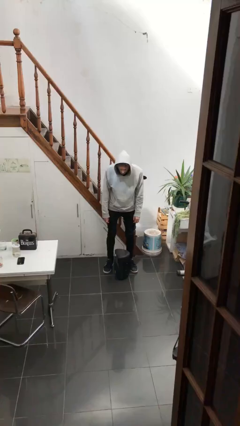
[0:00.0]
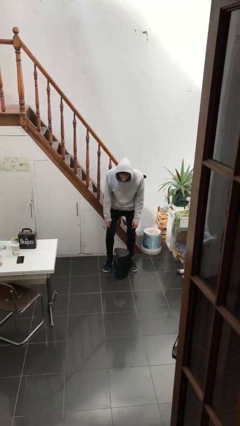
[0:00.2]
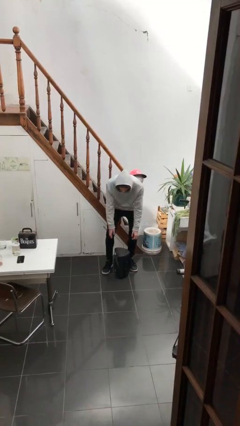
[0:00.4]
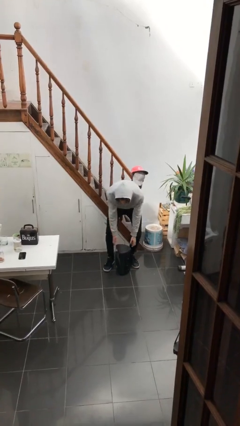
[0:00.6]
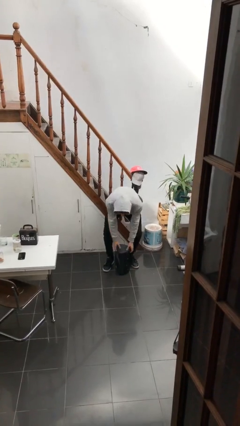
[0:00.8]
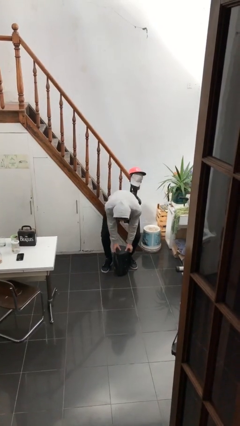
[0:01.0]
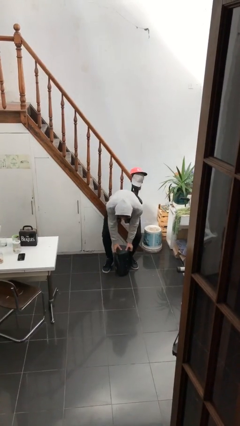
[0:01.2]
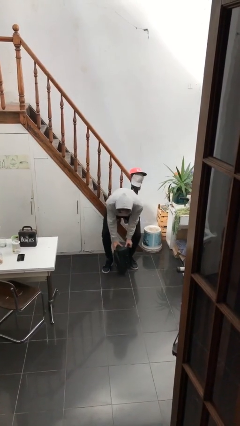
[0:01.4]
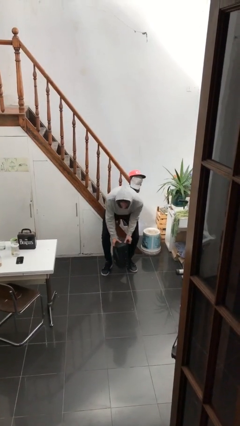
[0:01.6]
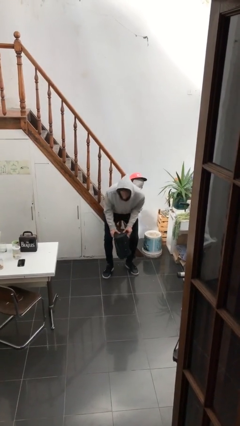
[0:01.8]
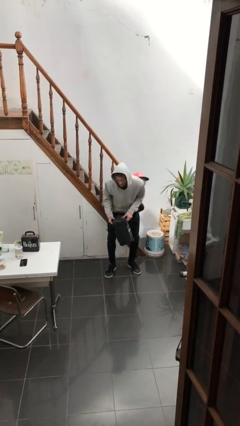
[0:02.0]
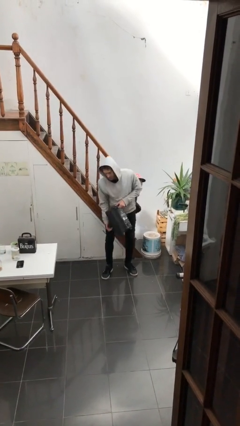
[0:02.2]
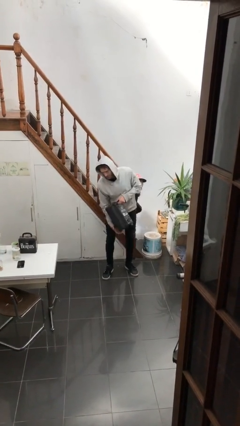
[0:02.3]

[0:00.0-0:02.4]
person picks up object from floor

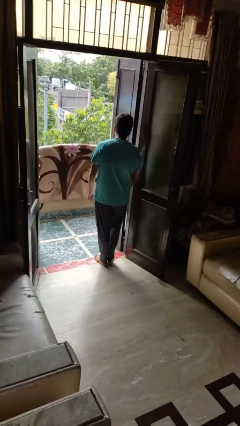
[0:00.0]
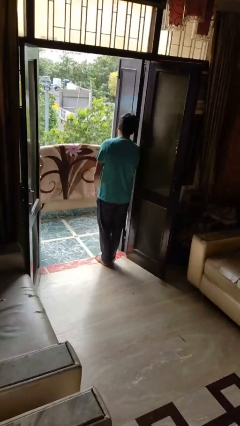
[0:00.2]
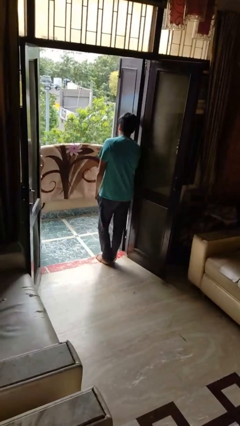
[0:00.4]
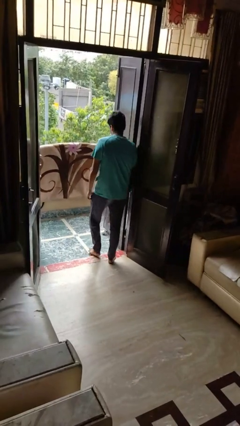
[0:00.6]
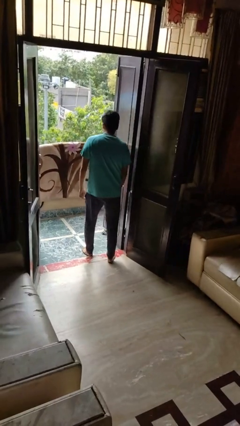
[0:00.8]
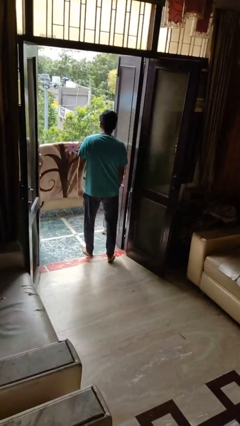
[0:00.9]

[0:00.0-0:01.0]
person bumps into wall

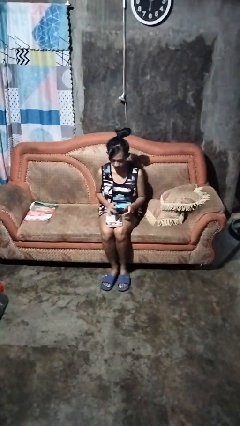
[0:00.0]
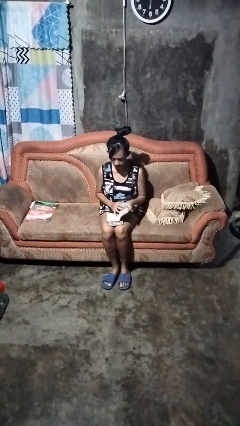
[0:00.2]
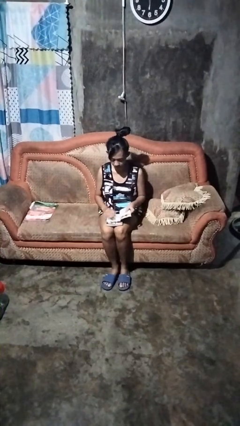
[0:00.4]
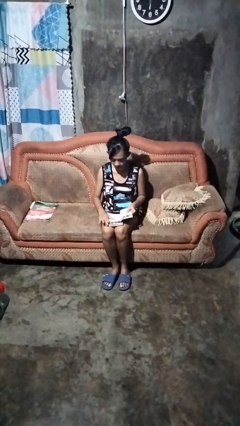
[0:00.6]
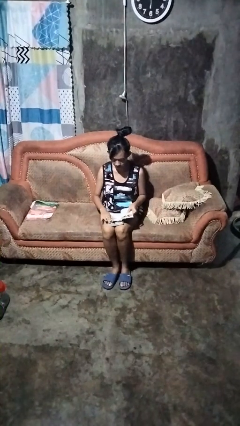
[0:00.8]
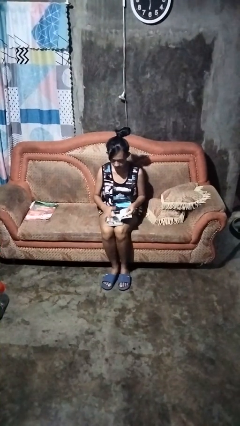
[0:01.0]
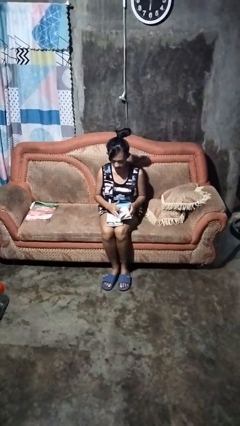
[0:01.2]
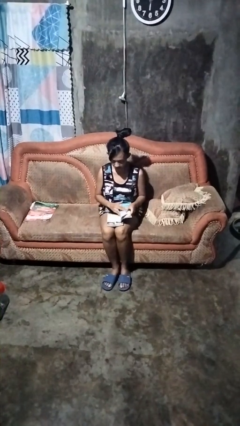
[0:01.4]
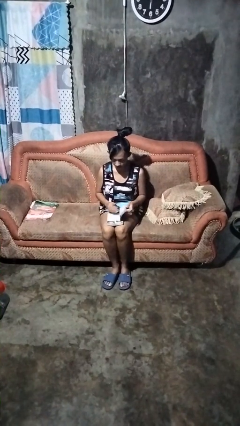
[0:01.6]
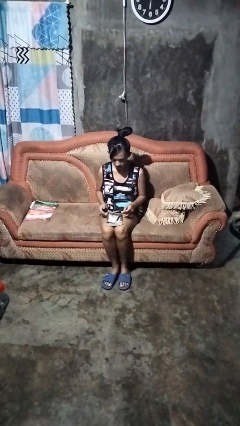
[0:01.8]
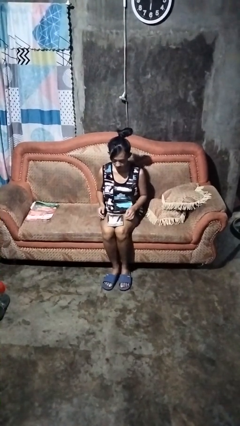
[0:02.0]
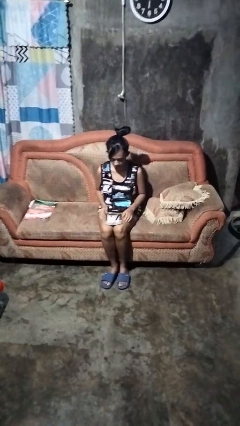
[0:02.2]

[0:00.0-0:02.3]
person reads book

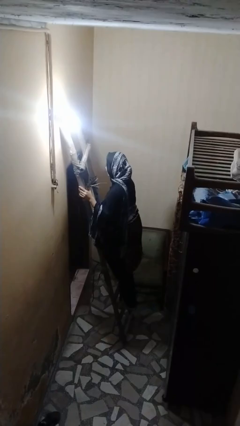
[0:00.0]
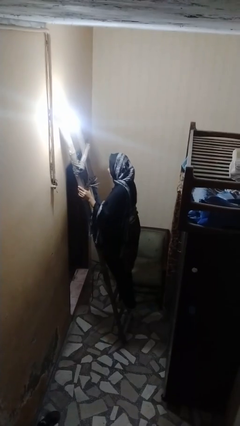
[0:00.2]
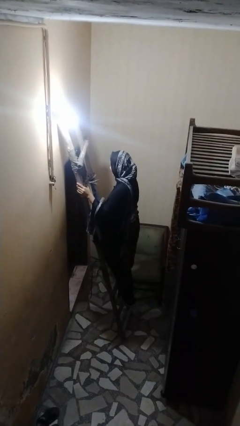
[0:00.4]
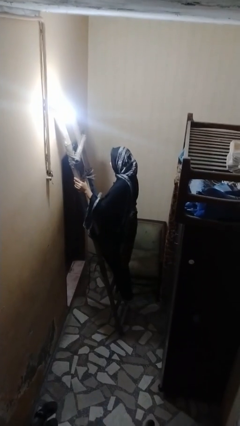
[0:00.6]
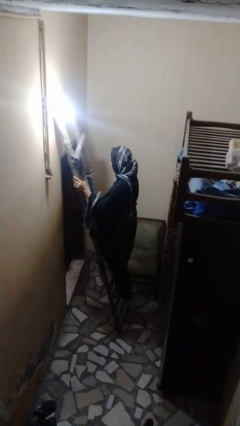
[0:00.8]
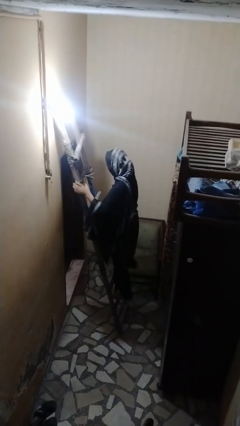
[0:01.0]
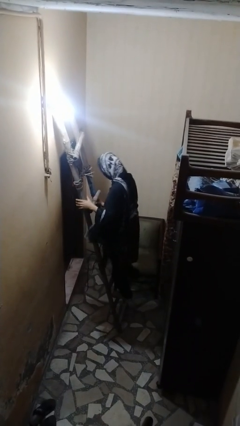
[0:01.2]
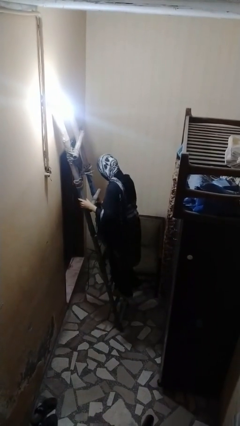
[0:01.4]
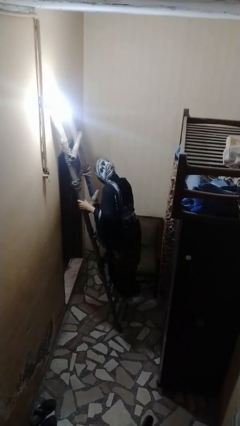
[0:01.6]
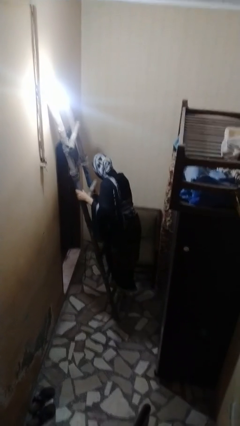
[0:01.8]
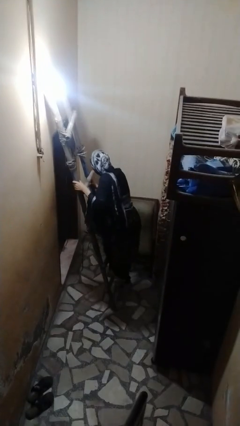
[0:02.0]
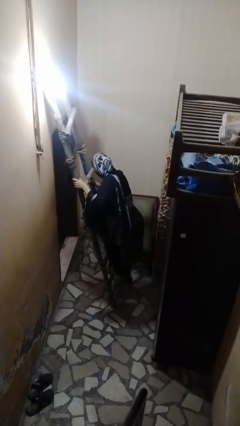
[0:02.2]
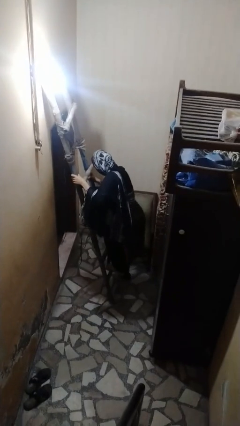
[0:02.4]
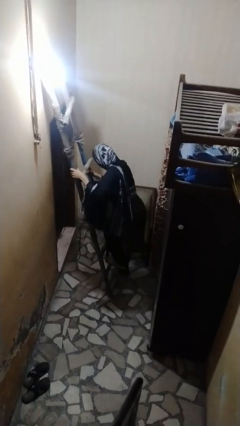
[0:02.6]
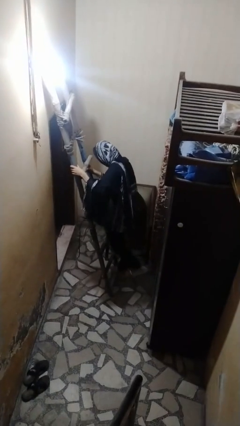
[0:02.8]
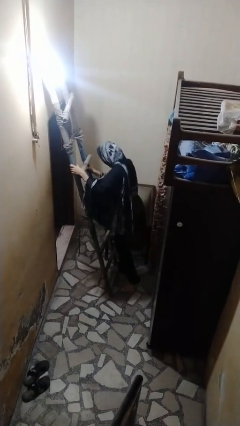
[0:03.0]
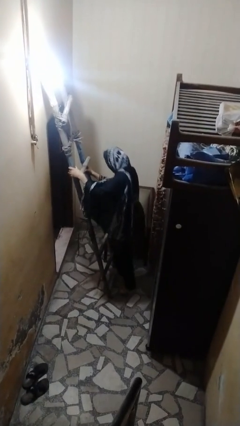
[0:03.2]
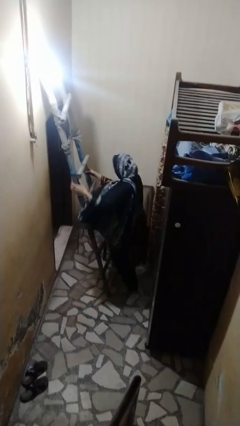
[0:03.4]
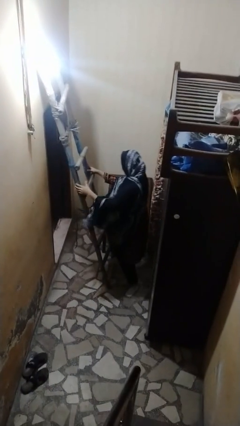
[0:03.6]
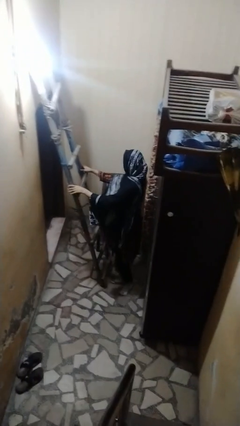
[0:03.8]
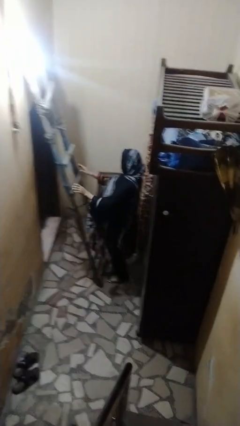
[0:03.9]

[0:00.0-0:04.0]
person climbs down ladder

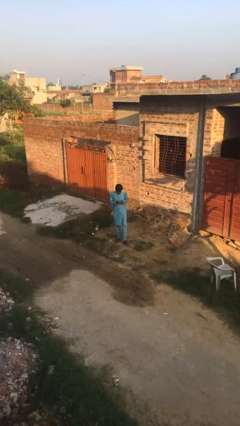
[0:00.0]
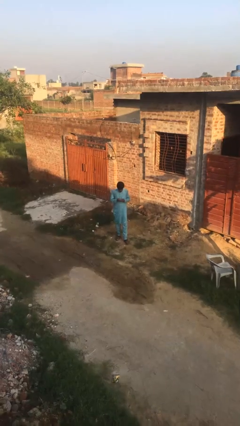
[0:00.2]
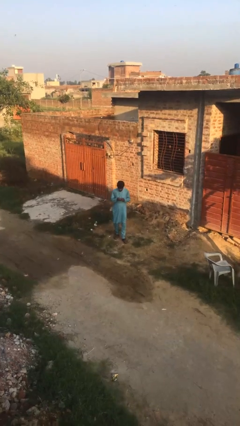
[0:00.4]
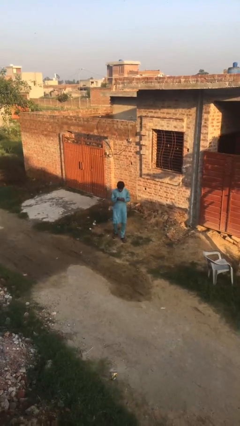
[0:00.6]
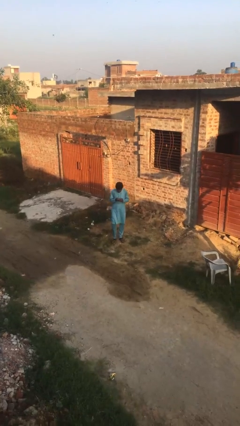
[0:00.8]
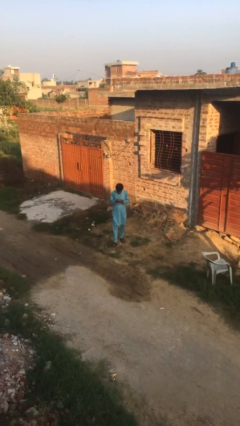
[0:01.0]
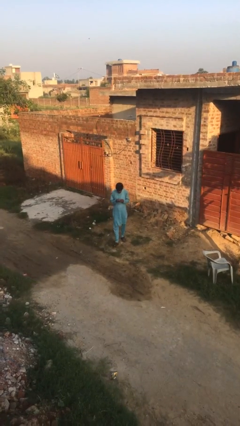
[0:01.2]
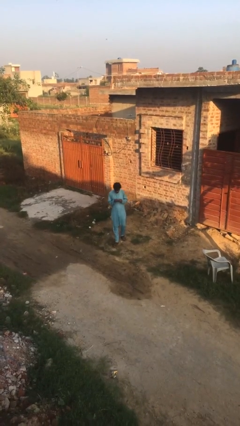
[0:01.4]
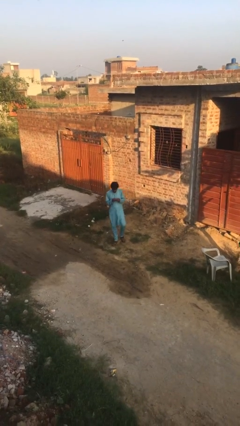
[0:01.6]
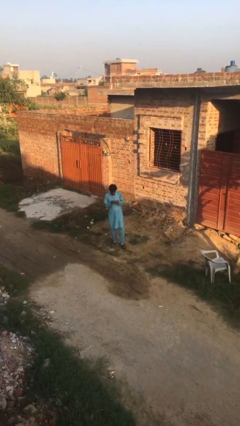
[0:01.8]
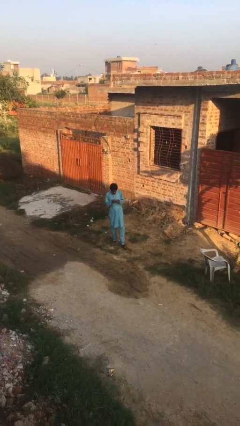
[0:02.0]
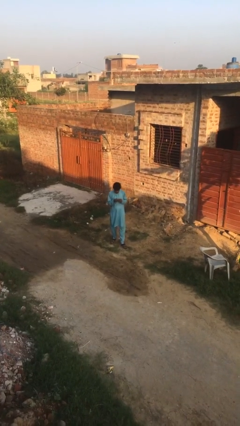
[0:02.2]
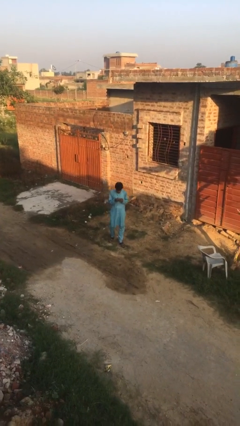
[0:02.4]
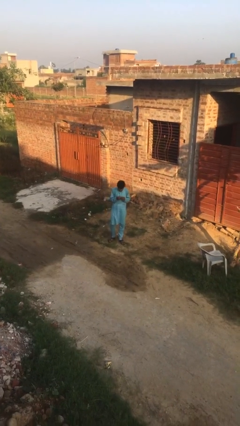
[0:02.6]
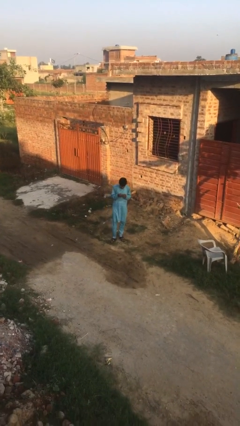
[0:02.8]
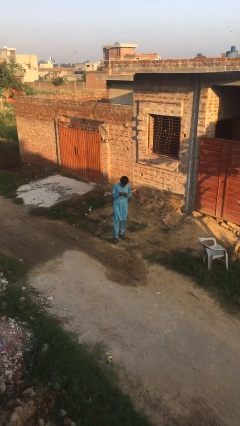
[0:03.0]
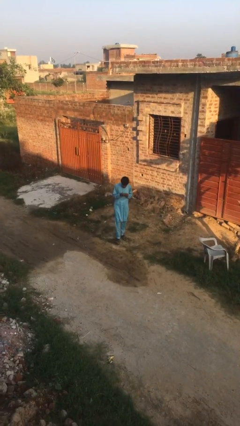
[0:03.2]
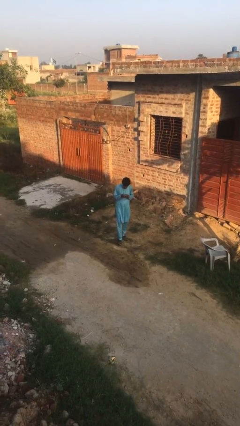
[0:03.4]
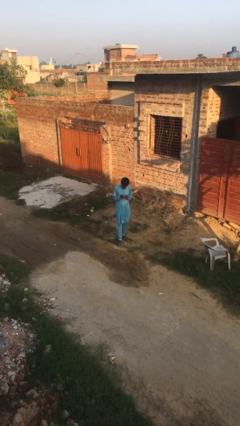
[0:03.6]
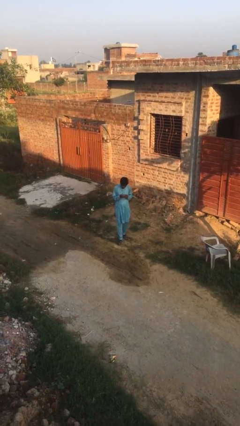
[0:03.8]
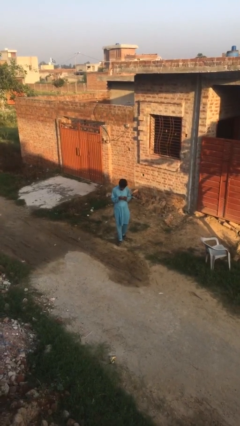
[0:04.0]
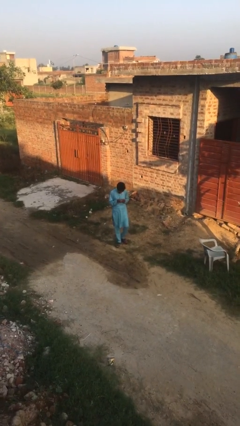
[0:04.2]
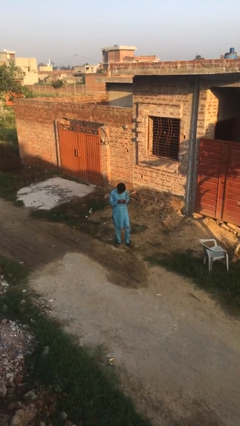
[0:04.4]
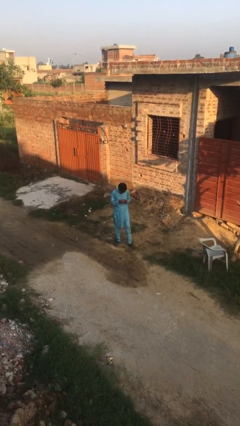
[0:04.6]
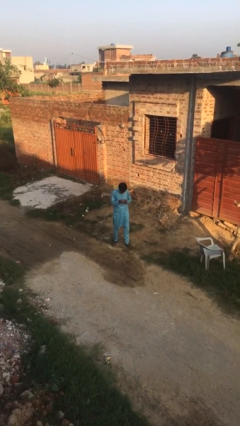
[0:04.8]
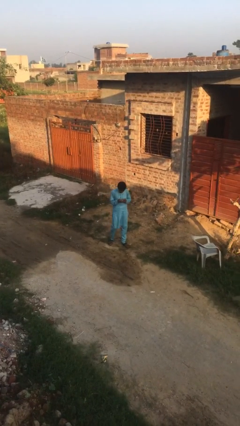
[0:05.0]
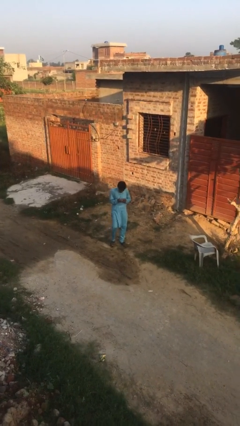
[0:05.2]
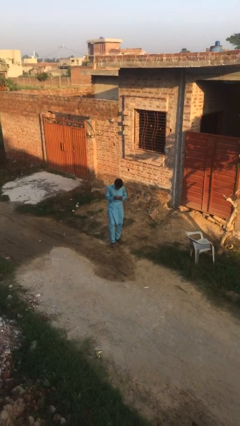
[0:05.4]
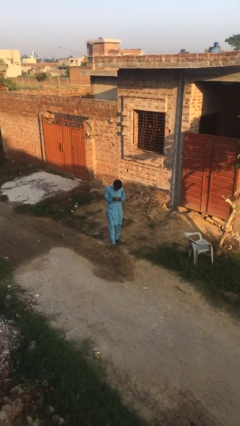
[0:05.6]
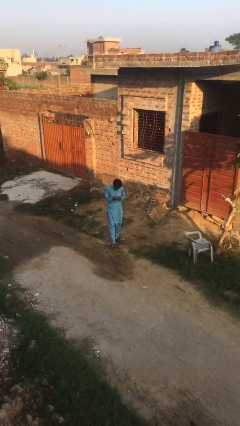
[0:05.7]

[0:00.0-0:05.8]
person texts on phone

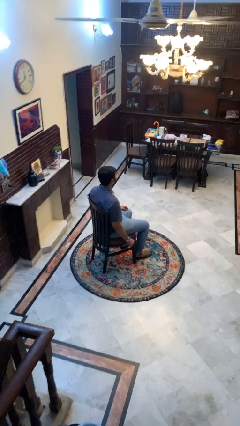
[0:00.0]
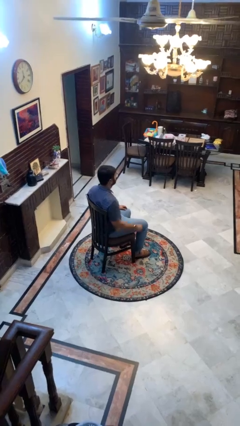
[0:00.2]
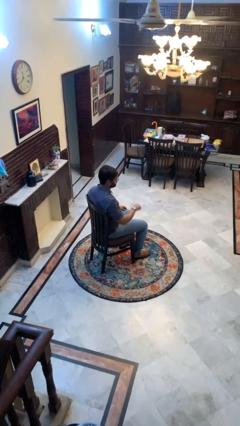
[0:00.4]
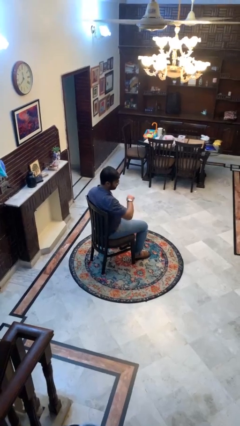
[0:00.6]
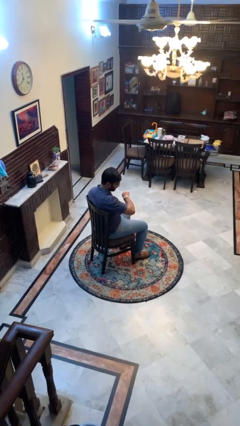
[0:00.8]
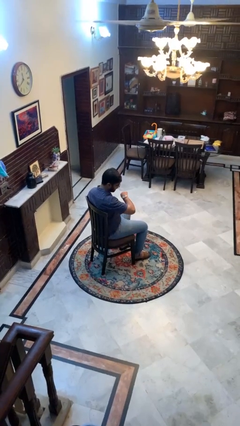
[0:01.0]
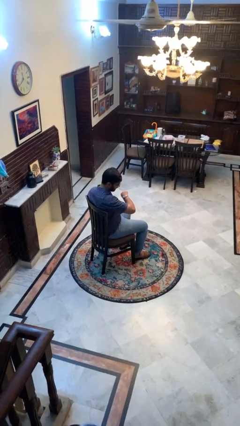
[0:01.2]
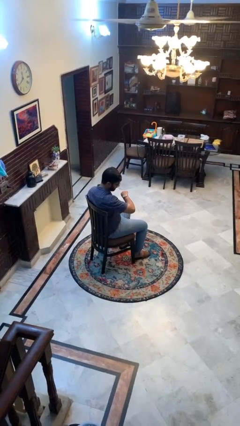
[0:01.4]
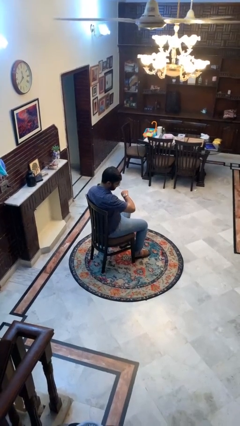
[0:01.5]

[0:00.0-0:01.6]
person looks at wristwatch

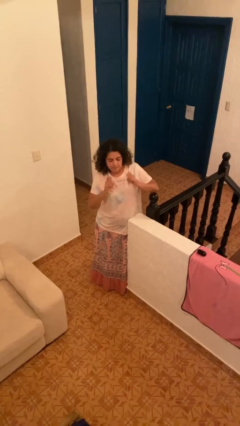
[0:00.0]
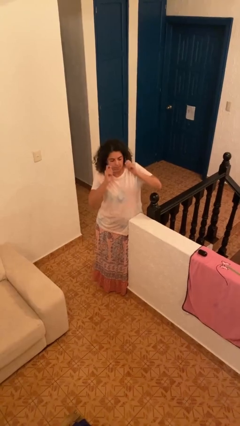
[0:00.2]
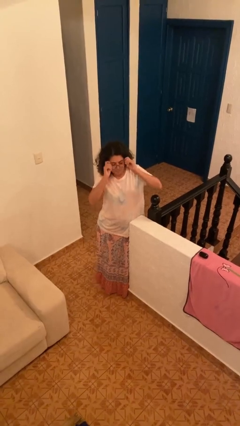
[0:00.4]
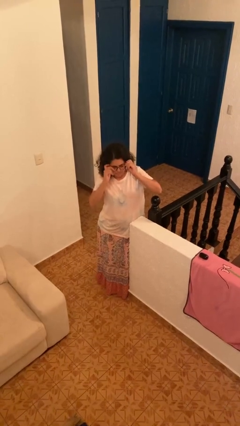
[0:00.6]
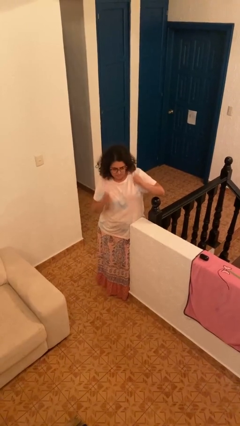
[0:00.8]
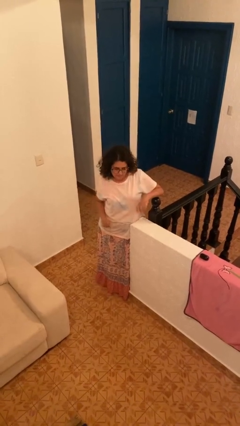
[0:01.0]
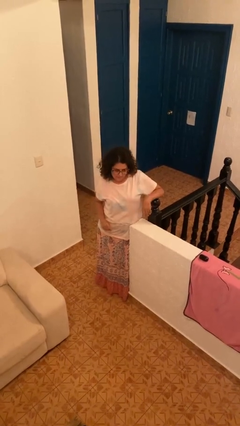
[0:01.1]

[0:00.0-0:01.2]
person puts on glasses
